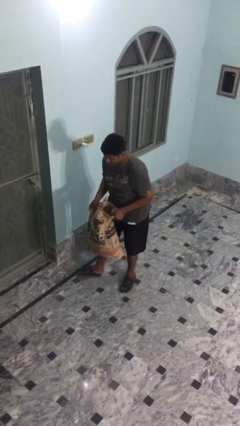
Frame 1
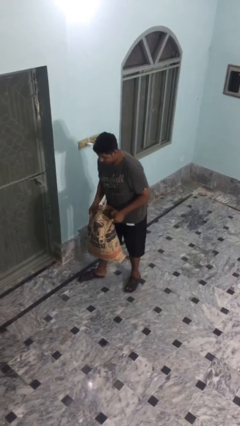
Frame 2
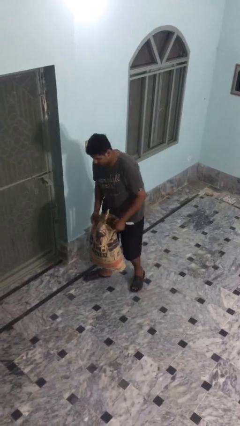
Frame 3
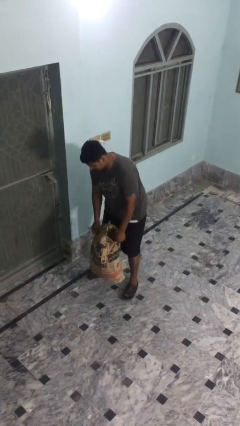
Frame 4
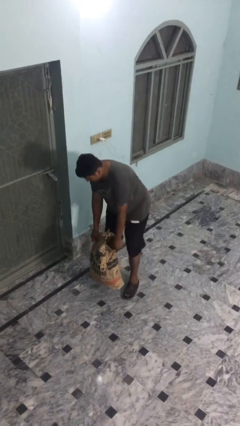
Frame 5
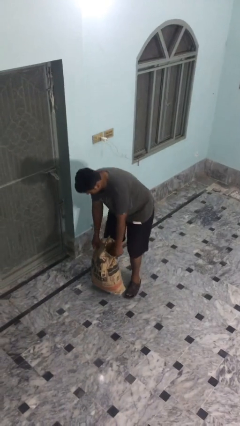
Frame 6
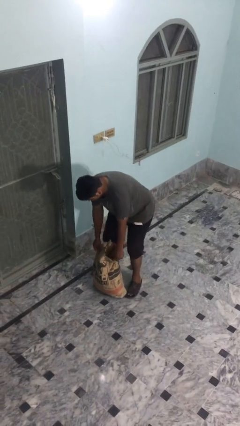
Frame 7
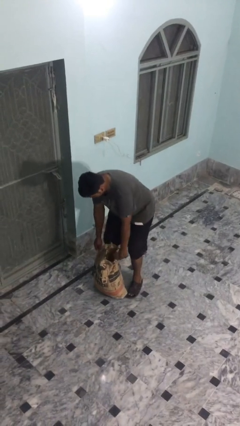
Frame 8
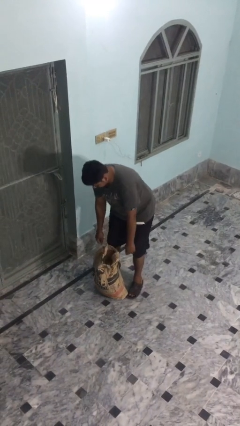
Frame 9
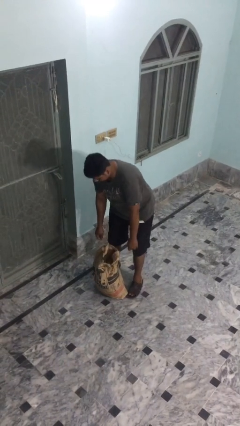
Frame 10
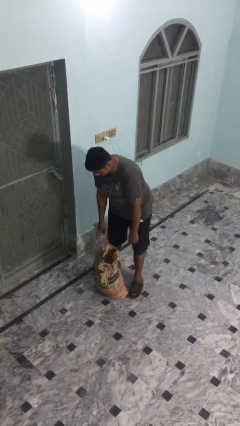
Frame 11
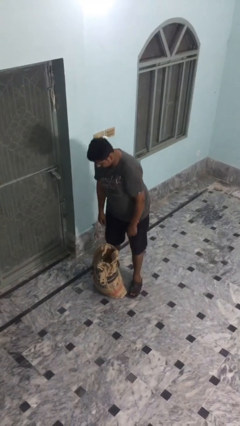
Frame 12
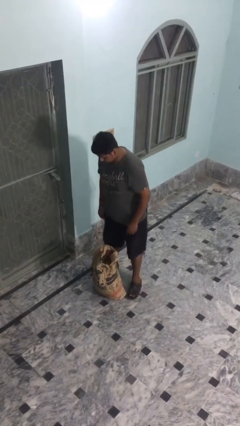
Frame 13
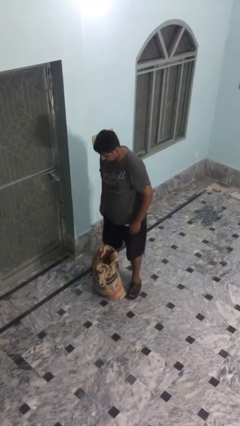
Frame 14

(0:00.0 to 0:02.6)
person puts down object on floor

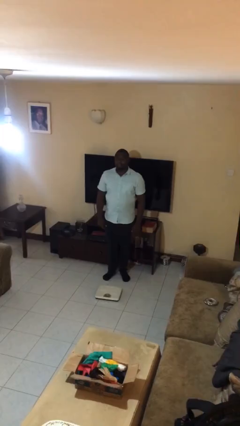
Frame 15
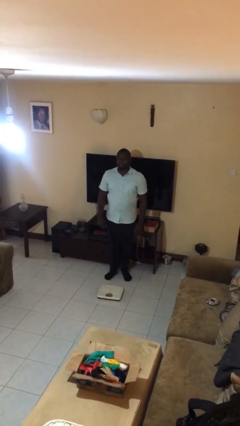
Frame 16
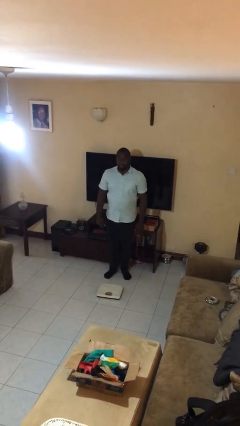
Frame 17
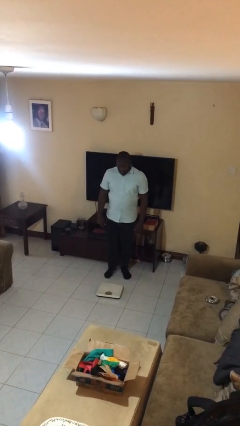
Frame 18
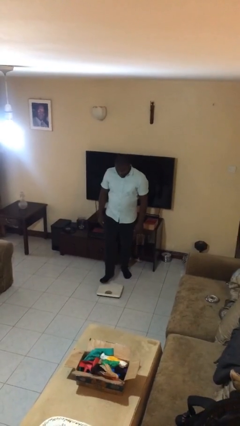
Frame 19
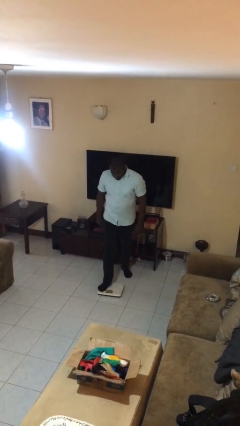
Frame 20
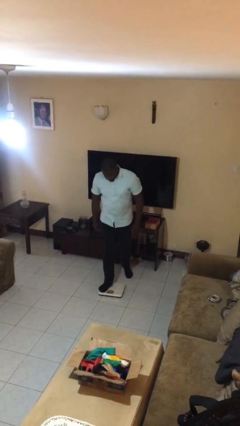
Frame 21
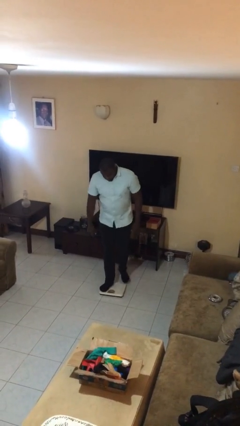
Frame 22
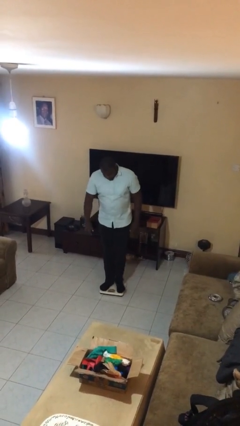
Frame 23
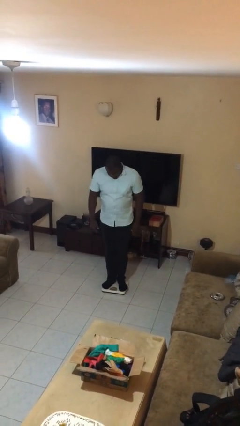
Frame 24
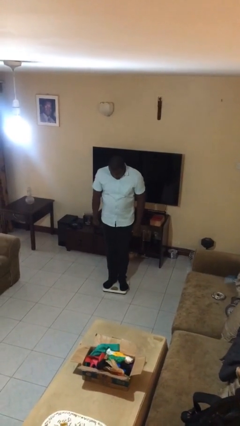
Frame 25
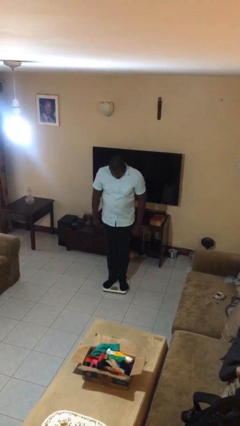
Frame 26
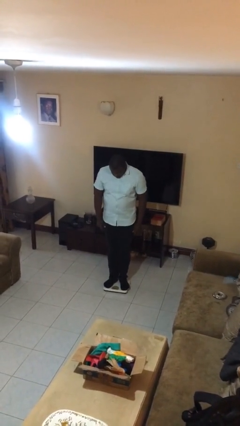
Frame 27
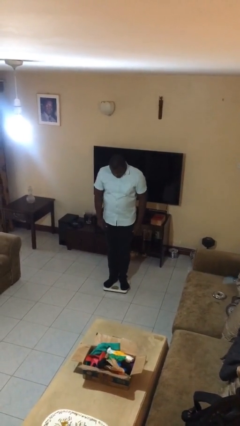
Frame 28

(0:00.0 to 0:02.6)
person uses bodyweight scale

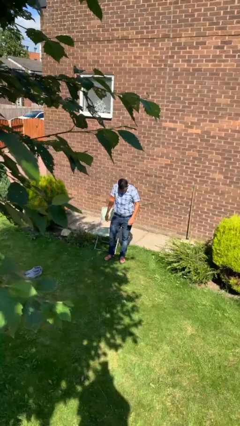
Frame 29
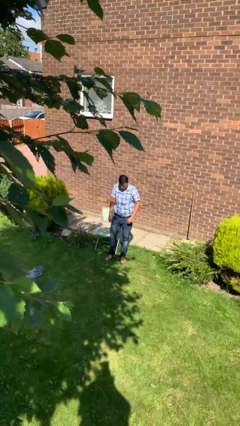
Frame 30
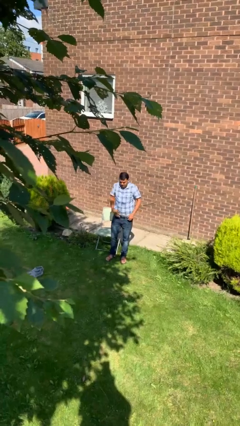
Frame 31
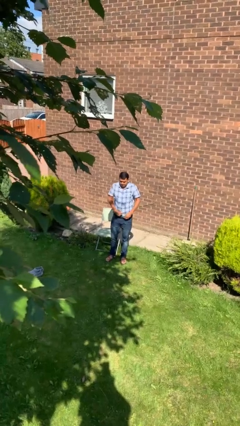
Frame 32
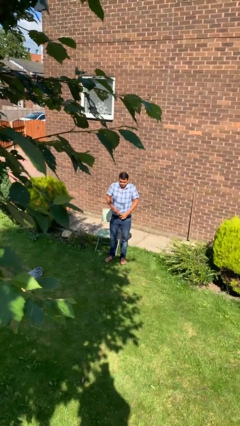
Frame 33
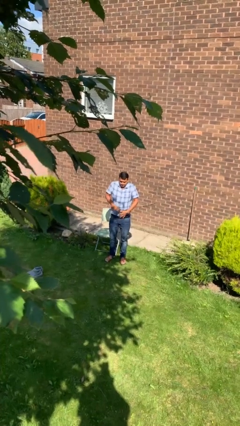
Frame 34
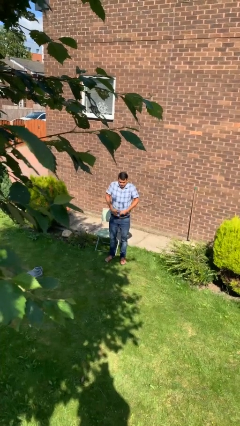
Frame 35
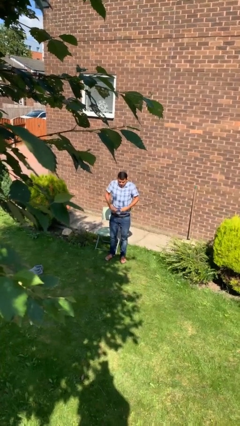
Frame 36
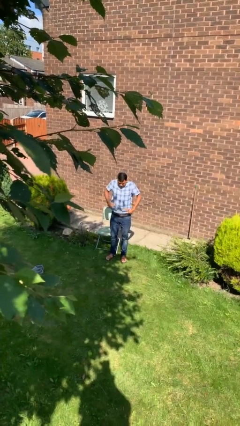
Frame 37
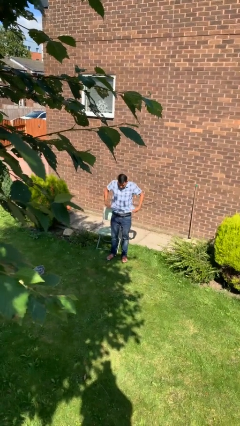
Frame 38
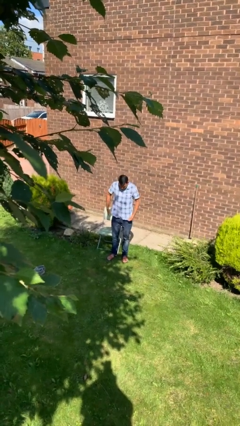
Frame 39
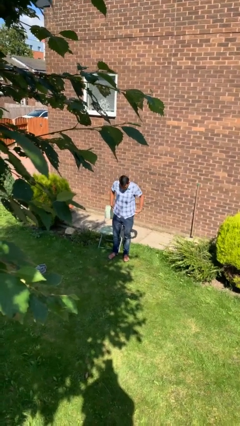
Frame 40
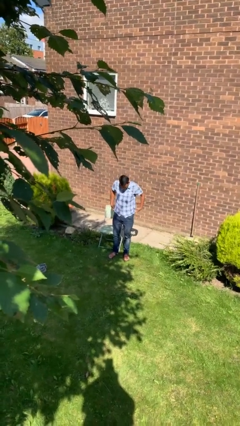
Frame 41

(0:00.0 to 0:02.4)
person untucks shirt

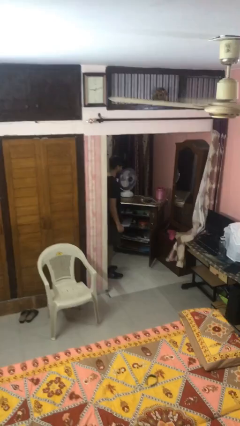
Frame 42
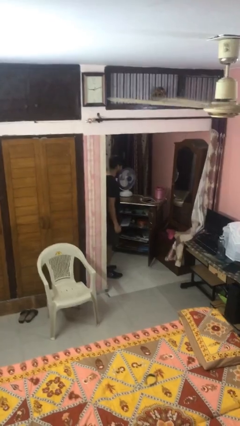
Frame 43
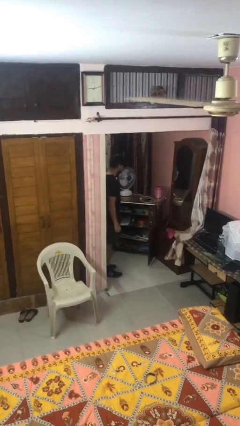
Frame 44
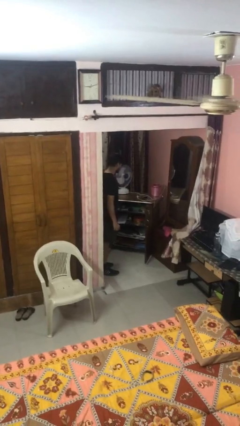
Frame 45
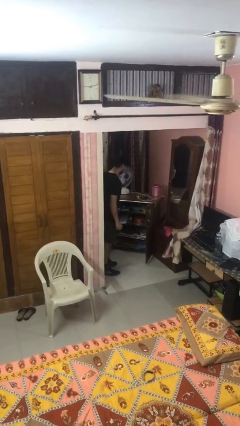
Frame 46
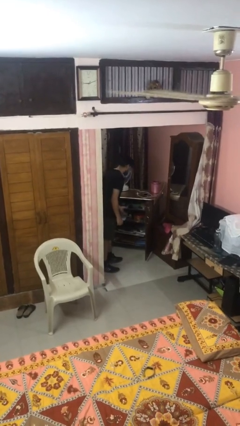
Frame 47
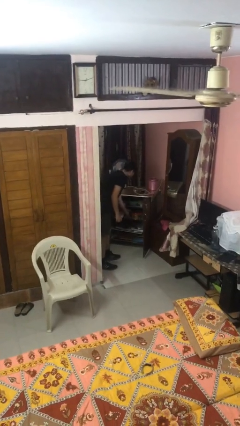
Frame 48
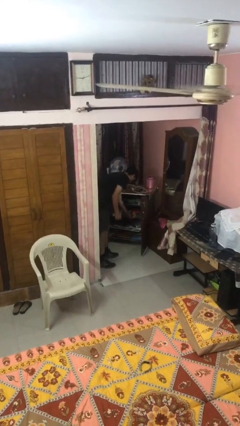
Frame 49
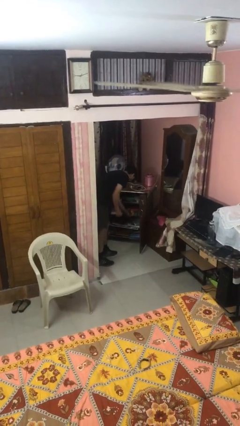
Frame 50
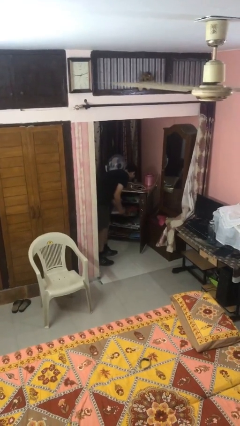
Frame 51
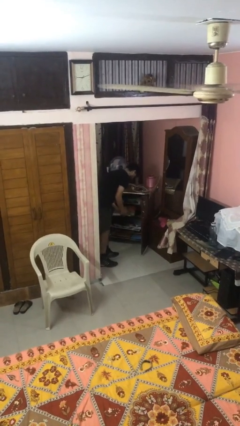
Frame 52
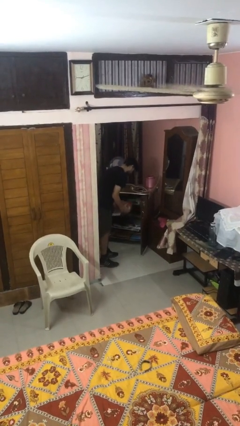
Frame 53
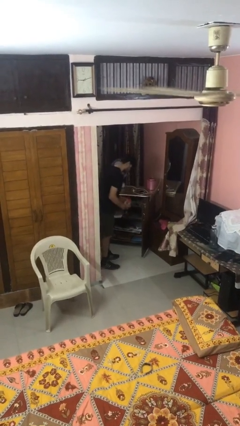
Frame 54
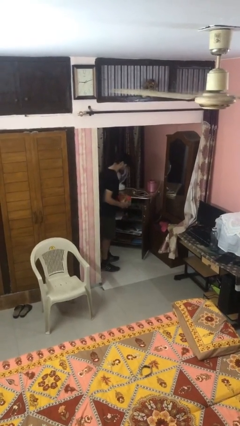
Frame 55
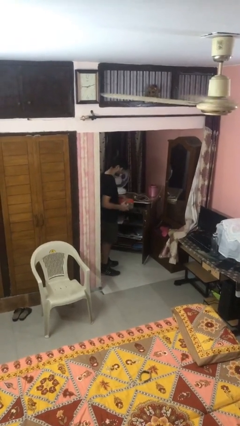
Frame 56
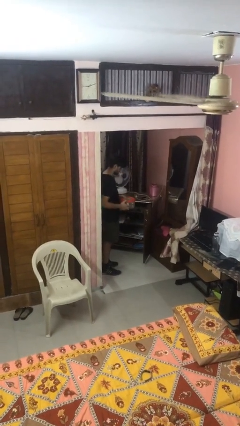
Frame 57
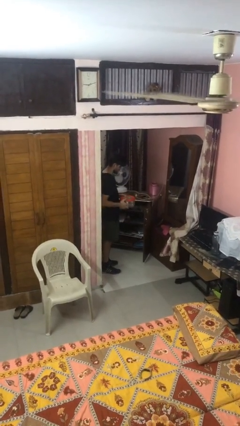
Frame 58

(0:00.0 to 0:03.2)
person picks up object from cabinet

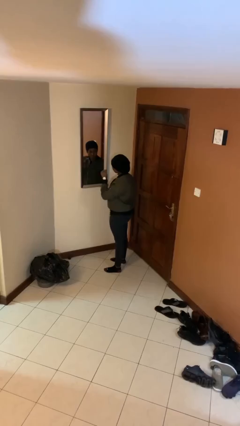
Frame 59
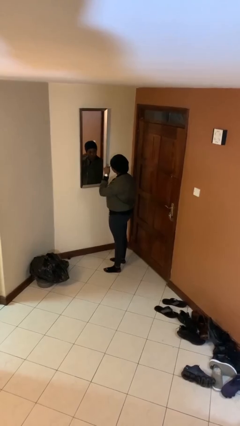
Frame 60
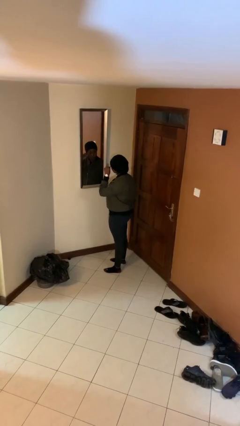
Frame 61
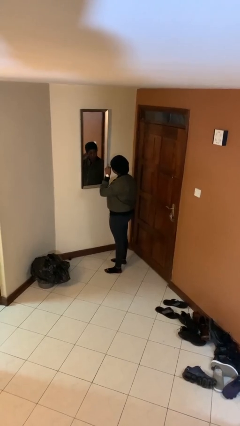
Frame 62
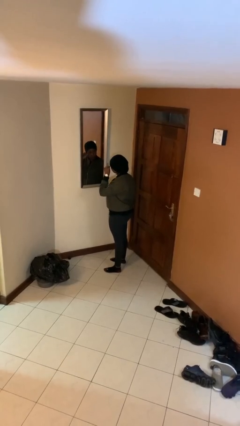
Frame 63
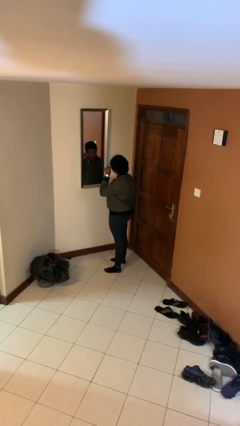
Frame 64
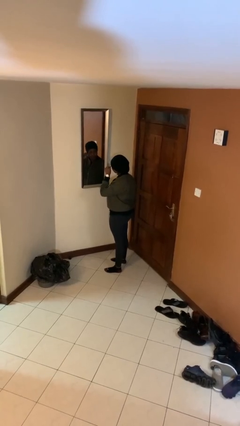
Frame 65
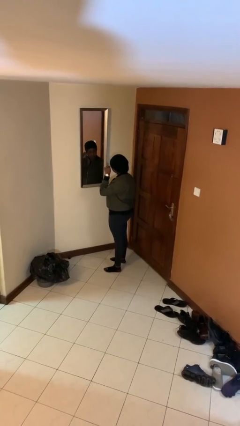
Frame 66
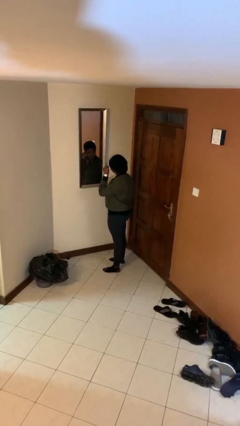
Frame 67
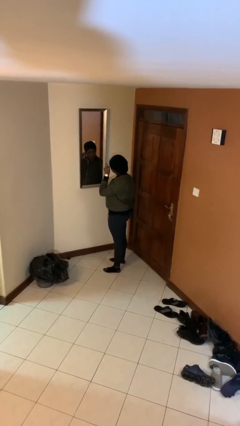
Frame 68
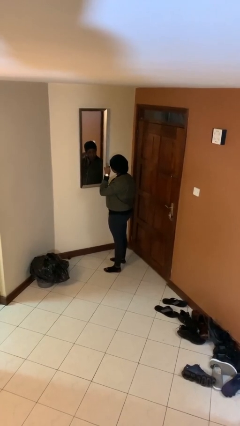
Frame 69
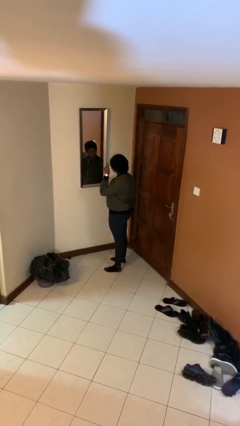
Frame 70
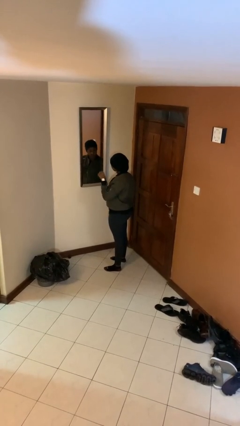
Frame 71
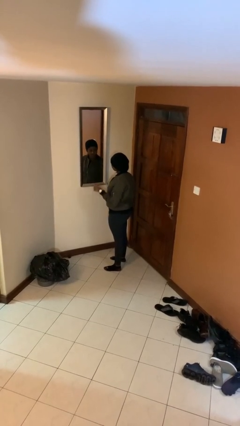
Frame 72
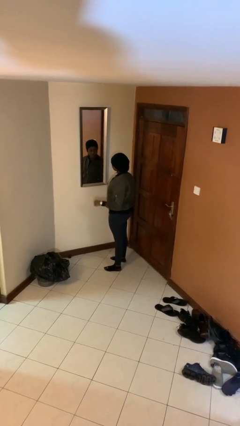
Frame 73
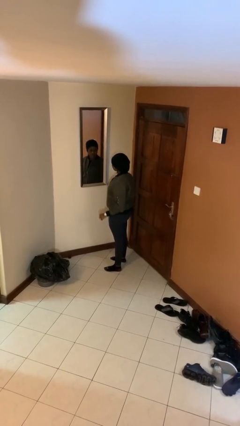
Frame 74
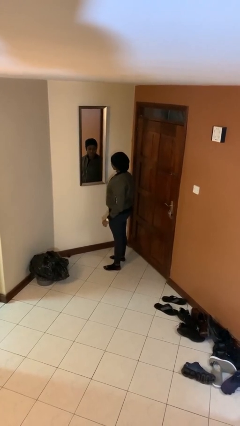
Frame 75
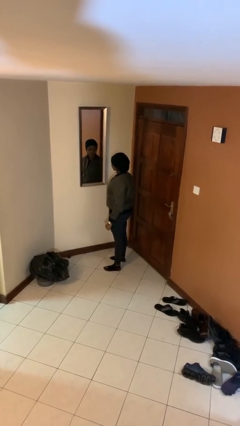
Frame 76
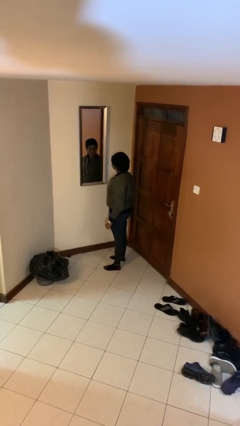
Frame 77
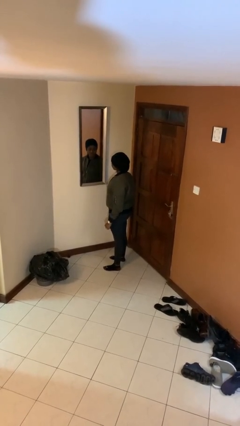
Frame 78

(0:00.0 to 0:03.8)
person applies eye makeup

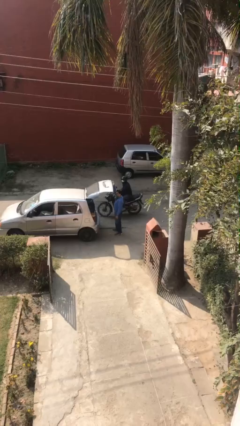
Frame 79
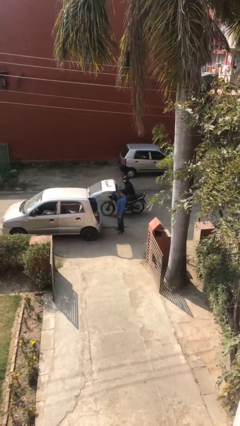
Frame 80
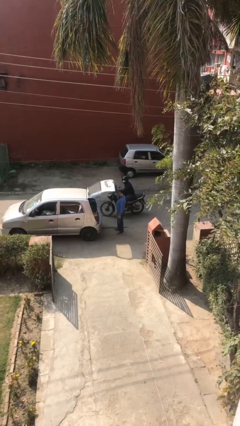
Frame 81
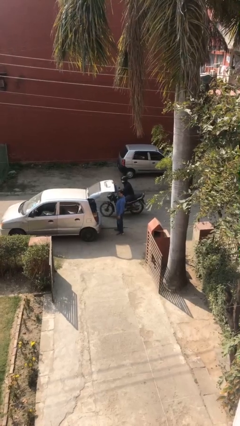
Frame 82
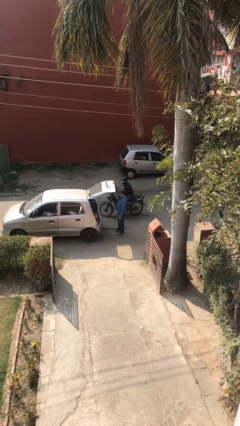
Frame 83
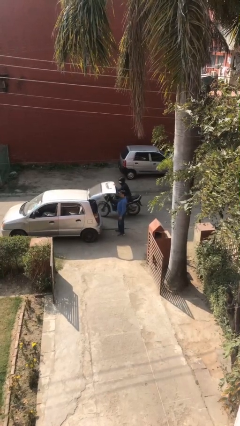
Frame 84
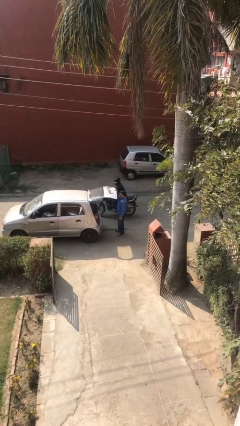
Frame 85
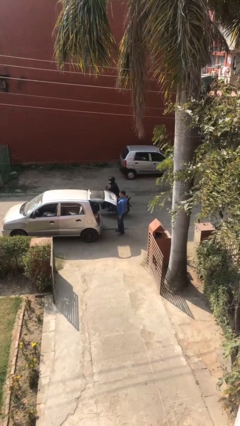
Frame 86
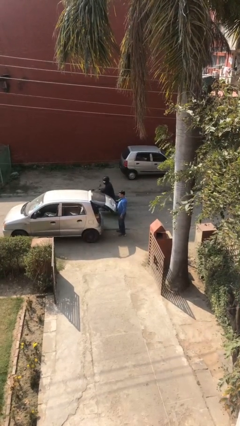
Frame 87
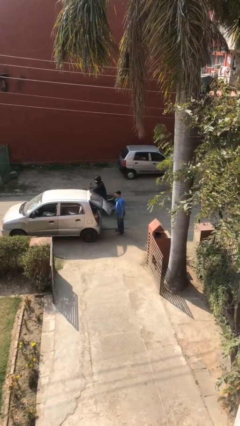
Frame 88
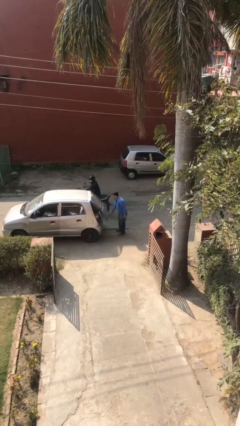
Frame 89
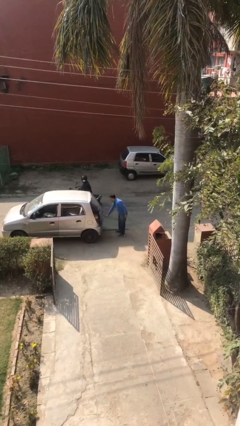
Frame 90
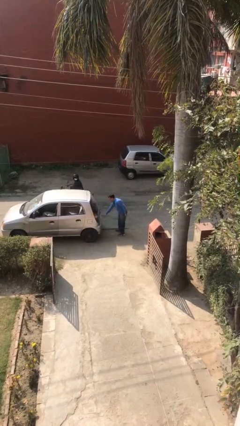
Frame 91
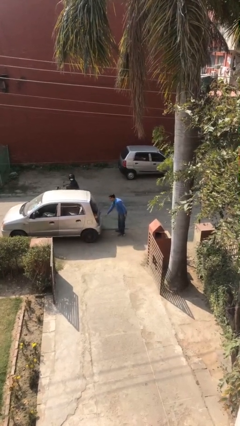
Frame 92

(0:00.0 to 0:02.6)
person closes car trunk

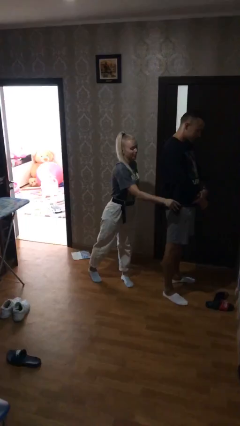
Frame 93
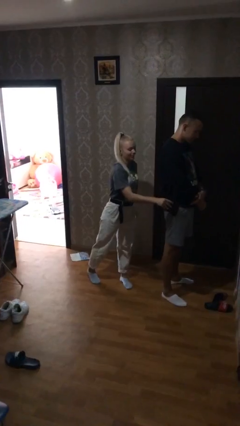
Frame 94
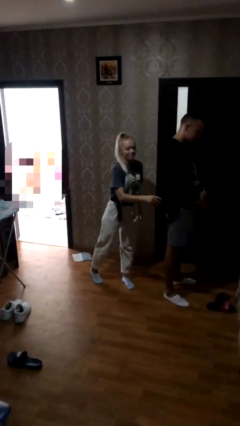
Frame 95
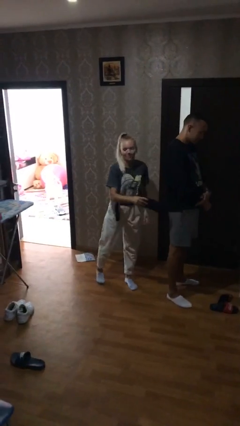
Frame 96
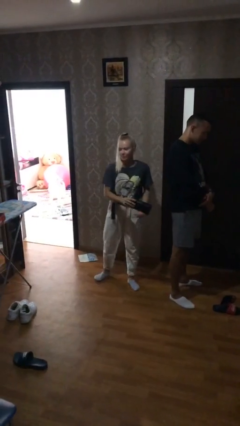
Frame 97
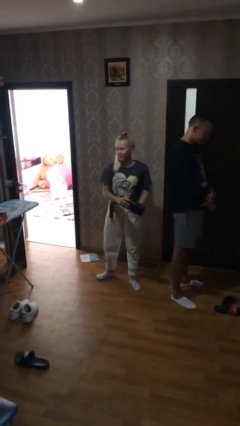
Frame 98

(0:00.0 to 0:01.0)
person steals object from person
